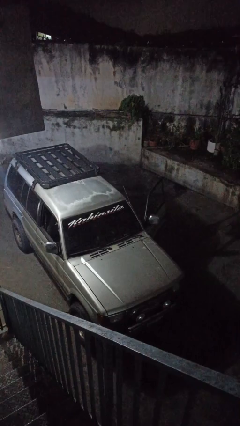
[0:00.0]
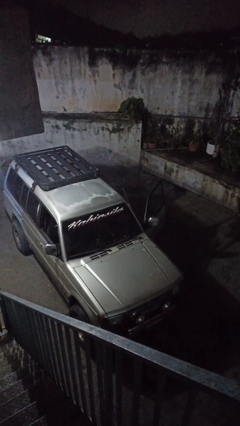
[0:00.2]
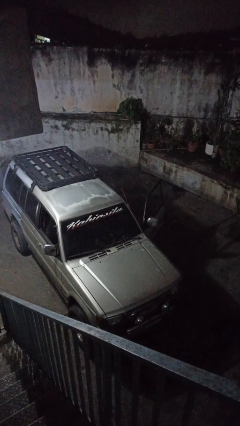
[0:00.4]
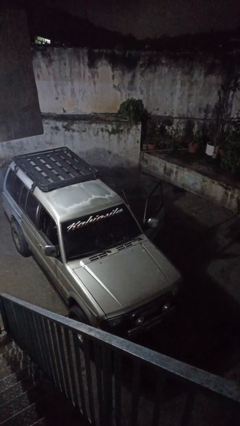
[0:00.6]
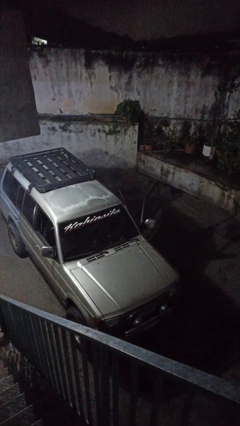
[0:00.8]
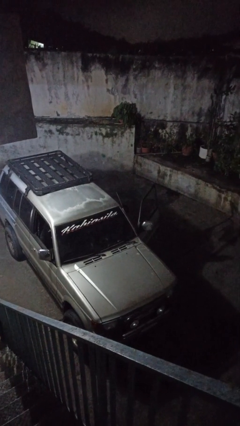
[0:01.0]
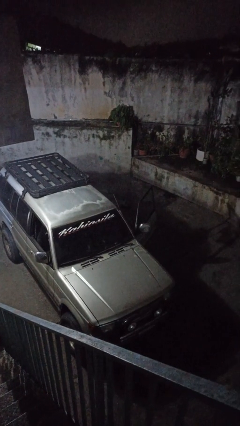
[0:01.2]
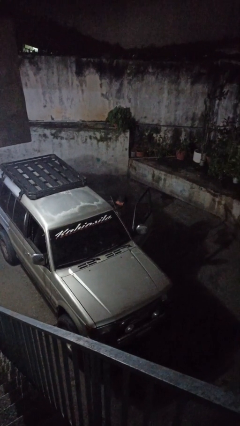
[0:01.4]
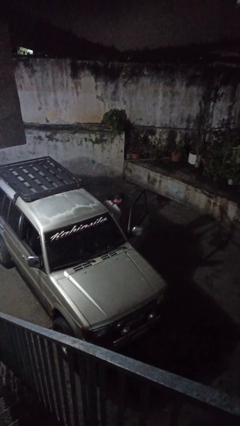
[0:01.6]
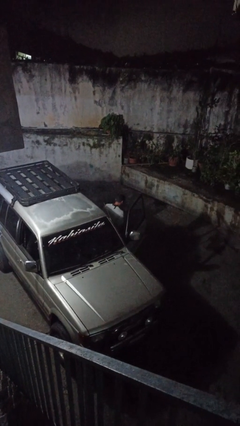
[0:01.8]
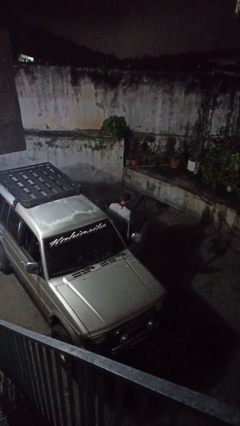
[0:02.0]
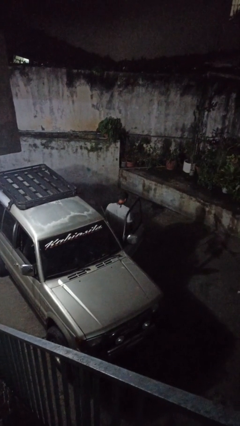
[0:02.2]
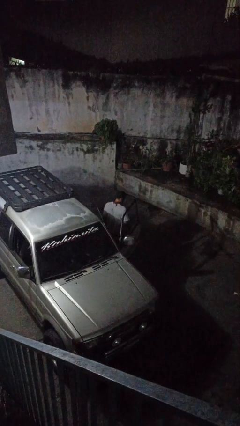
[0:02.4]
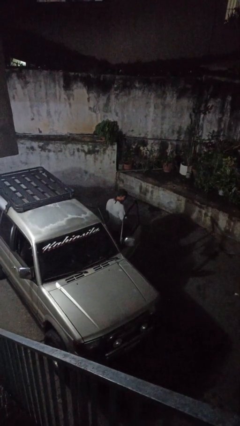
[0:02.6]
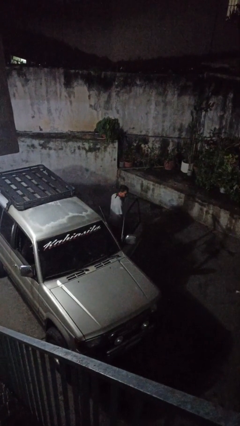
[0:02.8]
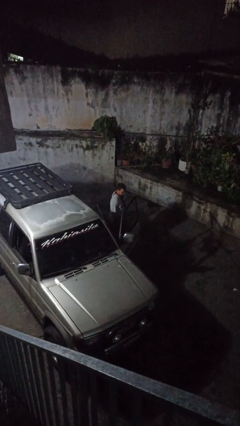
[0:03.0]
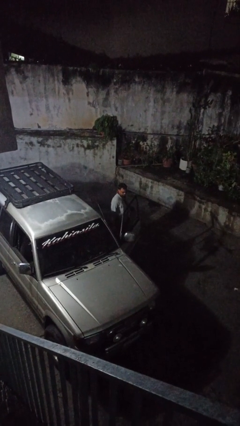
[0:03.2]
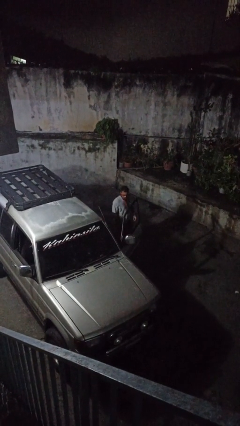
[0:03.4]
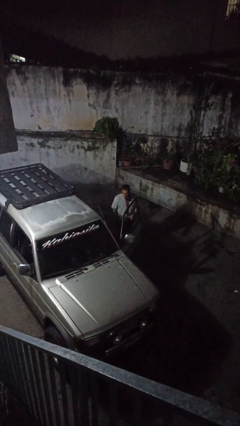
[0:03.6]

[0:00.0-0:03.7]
person exits car

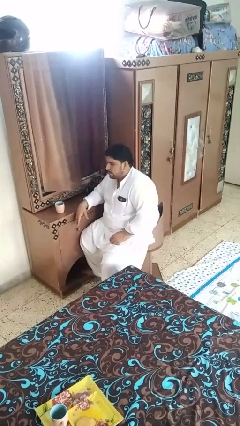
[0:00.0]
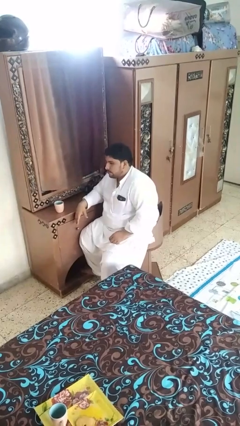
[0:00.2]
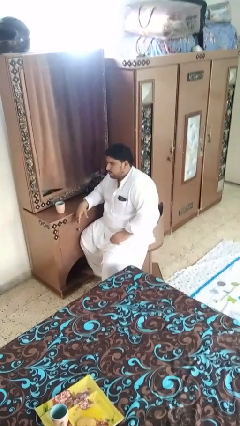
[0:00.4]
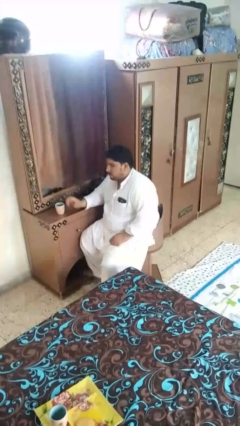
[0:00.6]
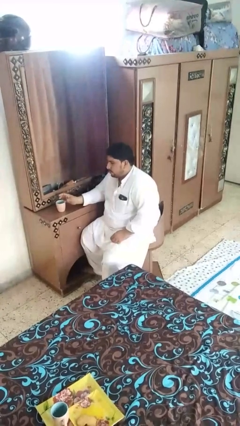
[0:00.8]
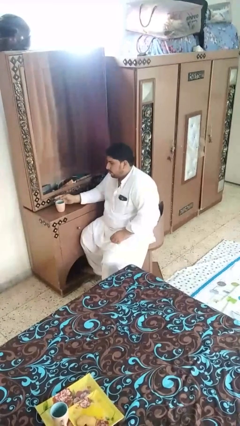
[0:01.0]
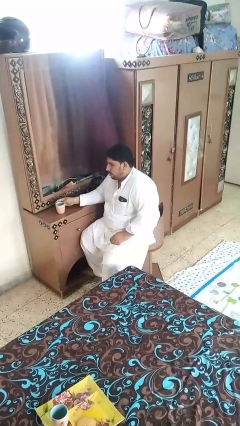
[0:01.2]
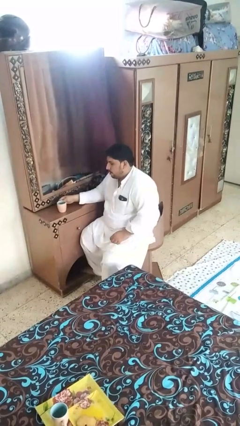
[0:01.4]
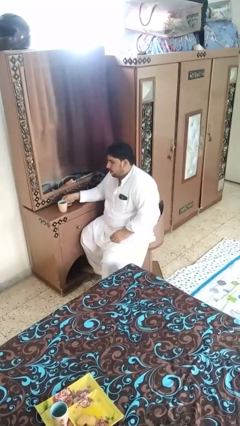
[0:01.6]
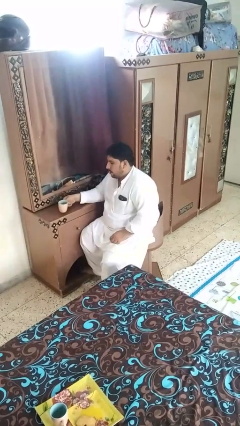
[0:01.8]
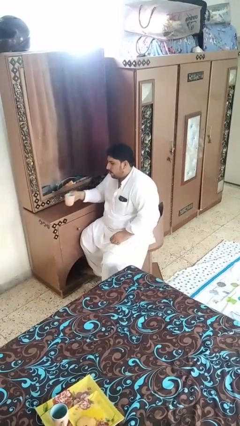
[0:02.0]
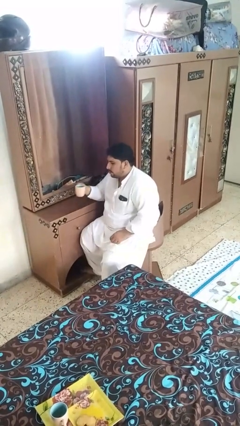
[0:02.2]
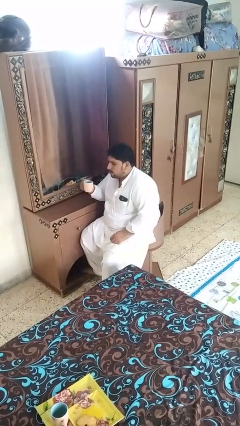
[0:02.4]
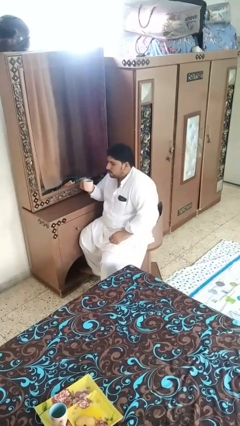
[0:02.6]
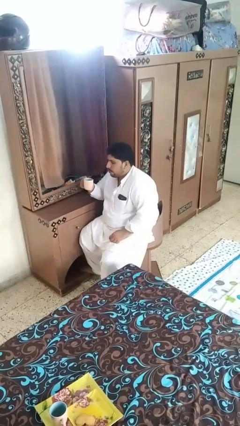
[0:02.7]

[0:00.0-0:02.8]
person picks up object from table

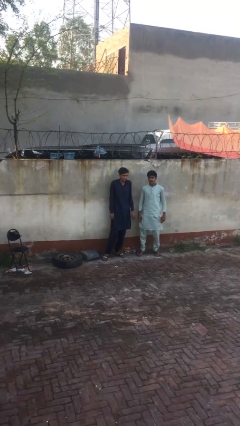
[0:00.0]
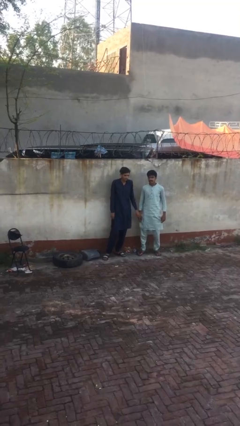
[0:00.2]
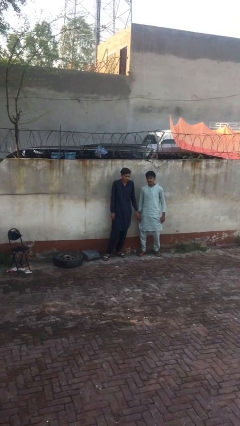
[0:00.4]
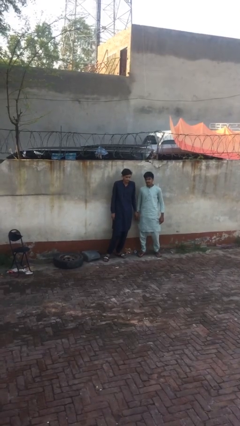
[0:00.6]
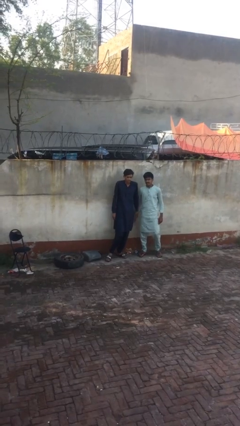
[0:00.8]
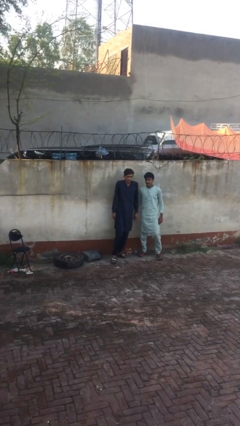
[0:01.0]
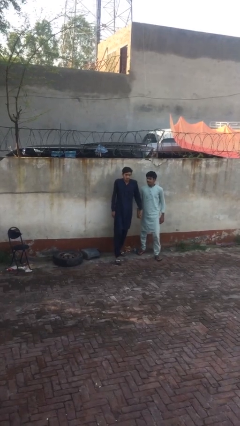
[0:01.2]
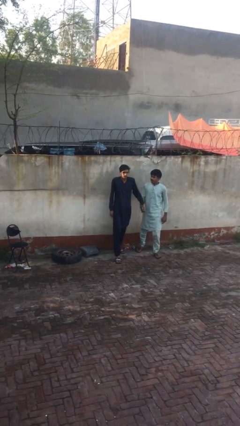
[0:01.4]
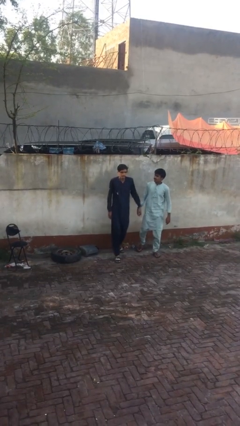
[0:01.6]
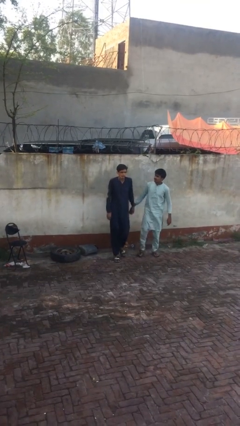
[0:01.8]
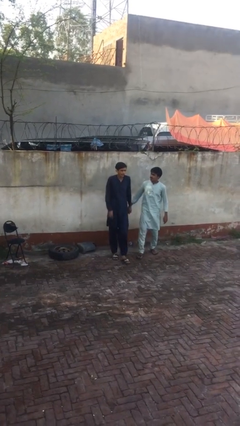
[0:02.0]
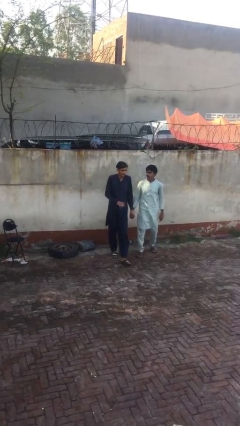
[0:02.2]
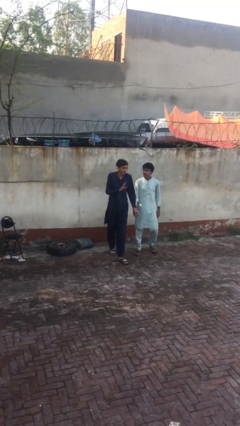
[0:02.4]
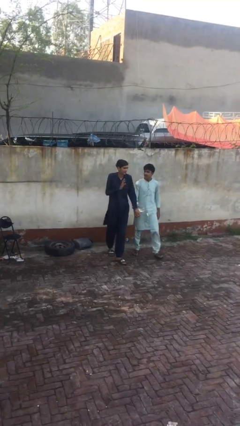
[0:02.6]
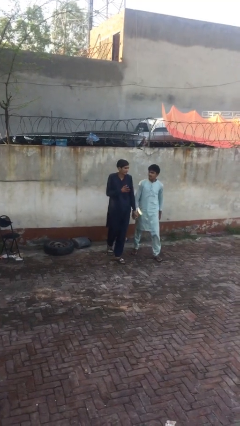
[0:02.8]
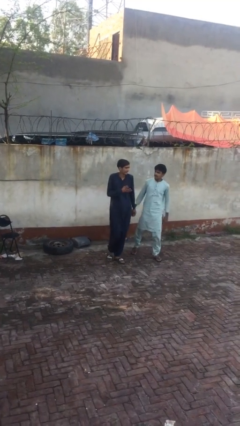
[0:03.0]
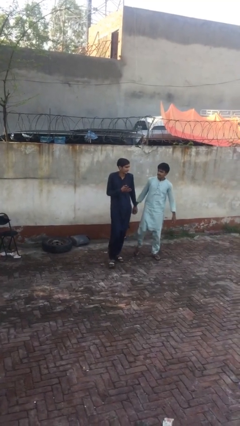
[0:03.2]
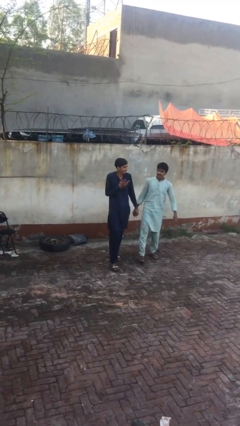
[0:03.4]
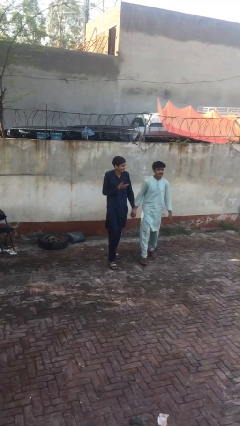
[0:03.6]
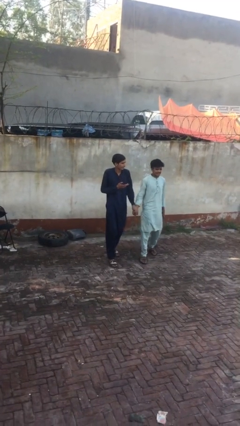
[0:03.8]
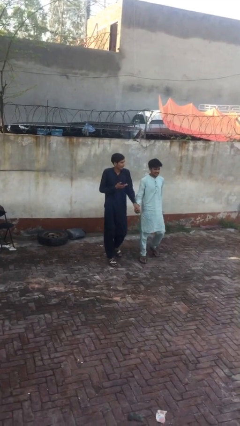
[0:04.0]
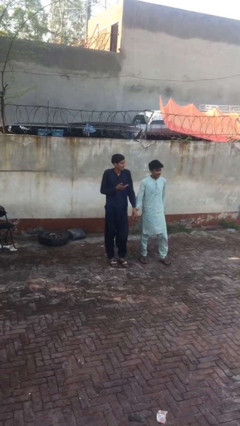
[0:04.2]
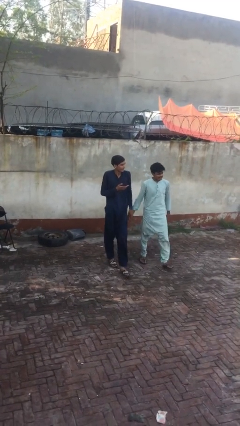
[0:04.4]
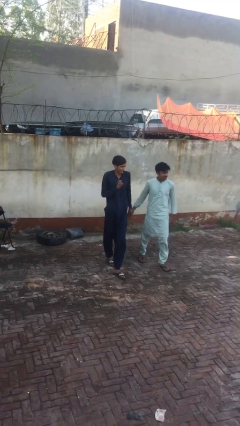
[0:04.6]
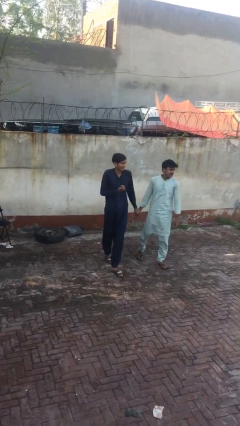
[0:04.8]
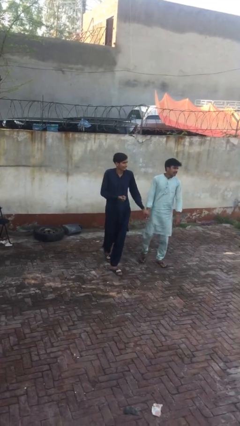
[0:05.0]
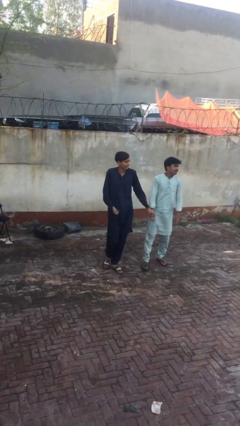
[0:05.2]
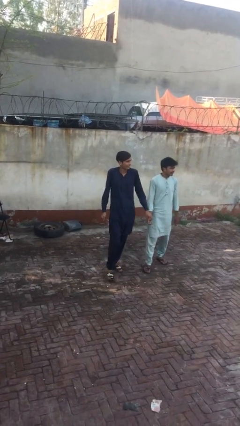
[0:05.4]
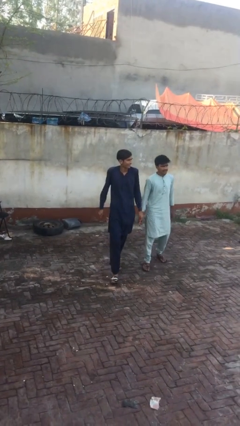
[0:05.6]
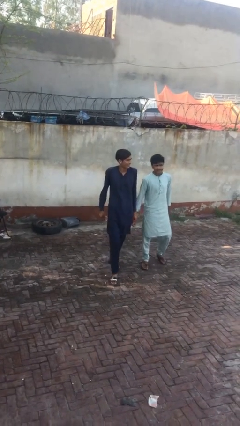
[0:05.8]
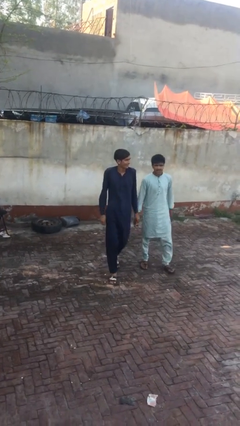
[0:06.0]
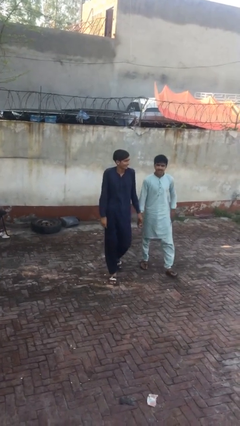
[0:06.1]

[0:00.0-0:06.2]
person holds hand

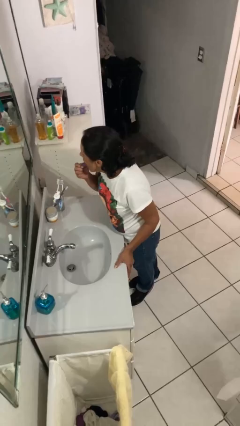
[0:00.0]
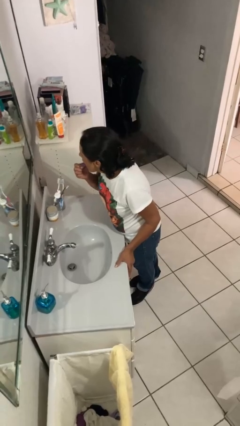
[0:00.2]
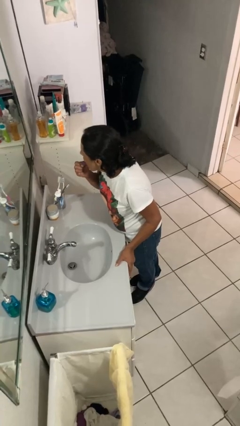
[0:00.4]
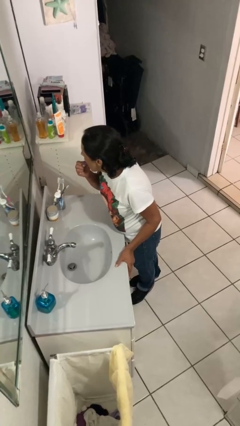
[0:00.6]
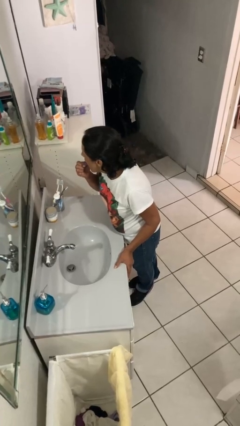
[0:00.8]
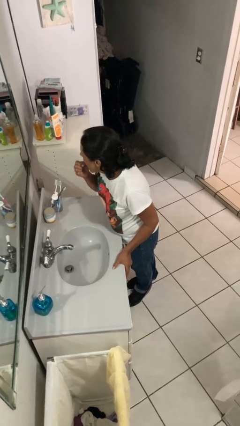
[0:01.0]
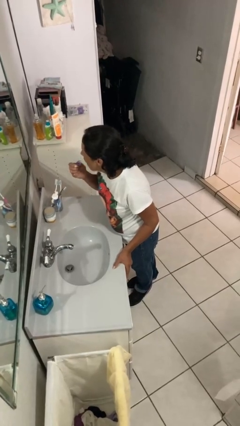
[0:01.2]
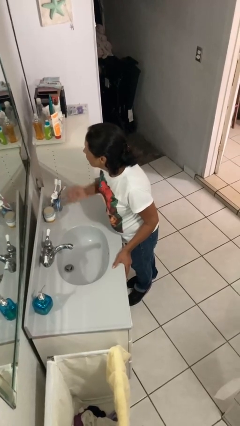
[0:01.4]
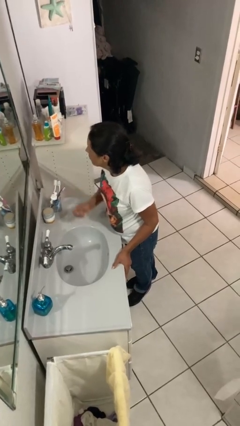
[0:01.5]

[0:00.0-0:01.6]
person flosses

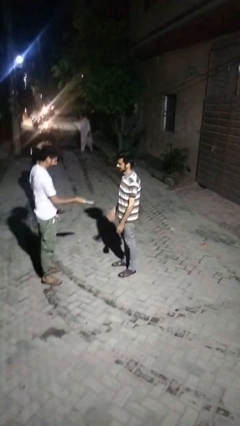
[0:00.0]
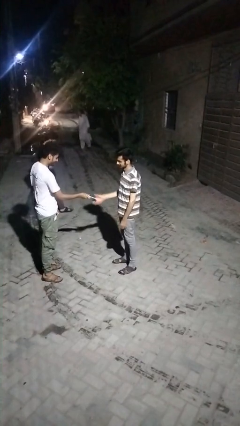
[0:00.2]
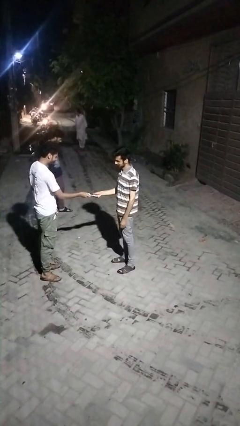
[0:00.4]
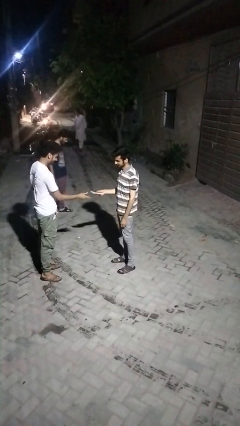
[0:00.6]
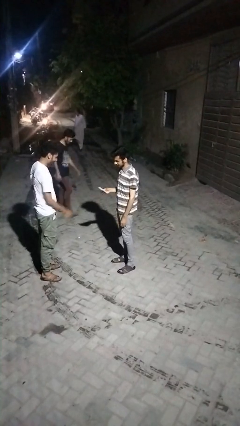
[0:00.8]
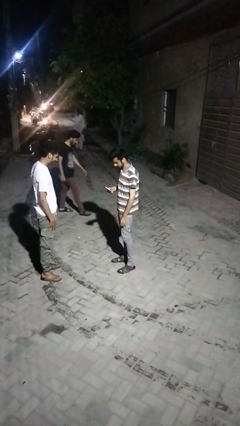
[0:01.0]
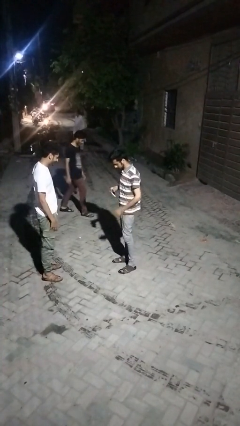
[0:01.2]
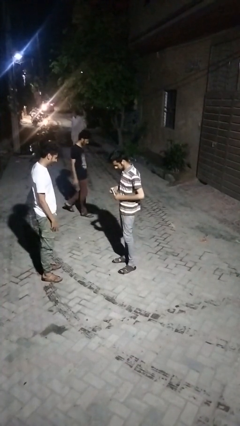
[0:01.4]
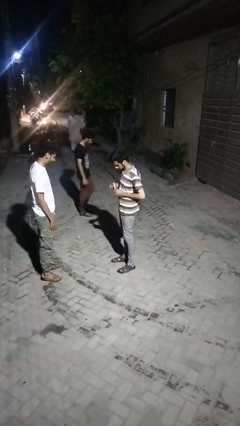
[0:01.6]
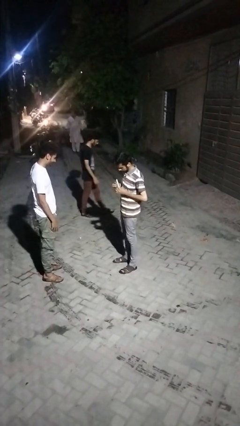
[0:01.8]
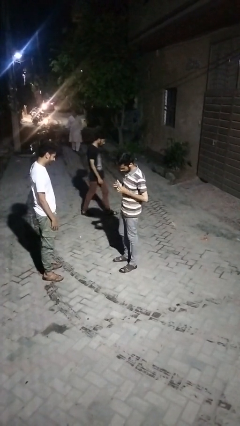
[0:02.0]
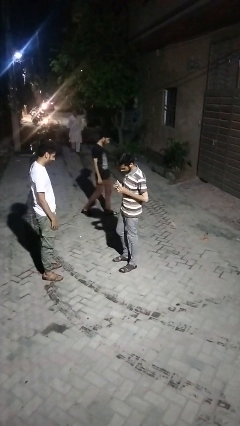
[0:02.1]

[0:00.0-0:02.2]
person transfers object to person

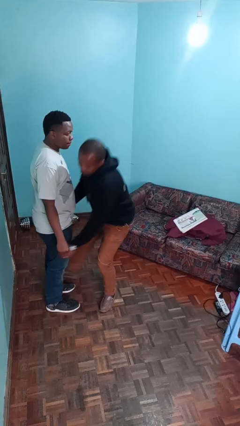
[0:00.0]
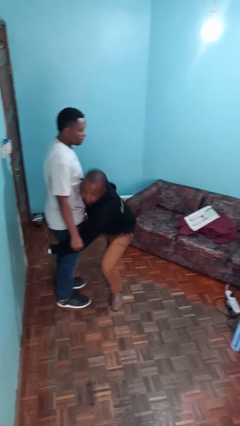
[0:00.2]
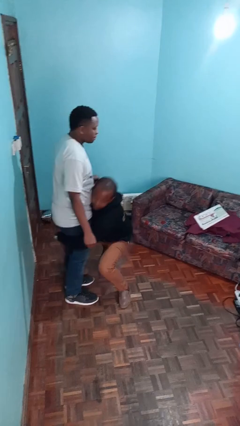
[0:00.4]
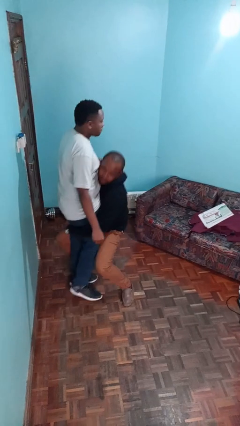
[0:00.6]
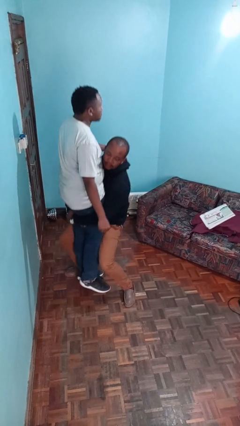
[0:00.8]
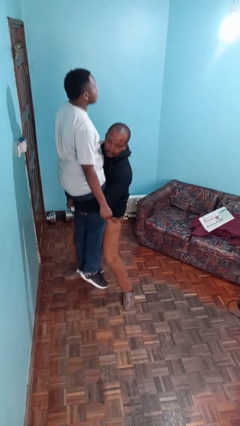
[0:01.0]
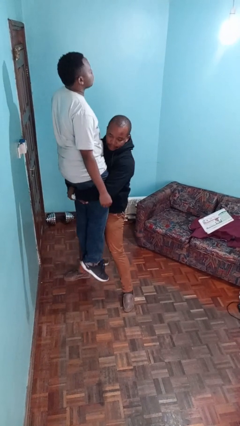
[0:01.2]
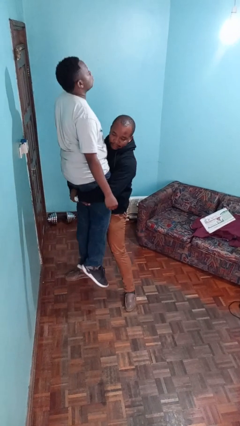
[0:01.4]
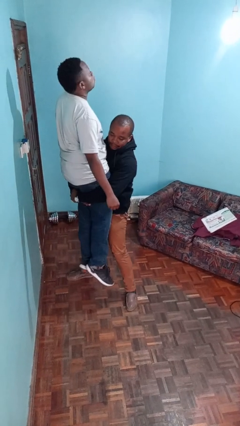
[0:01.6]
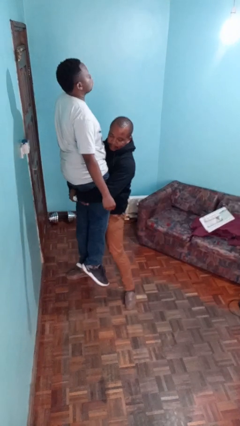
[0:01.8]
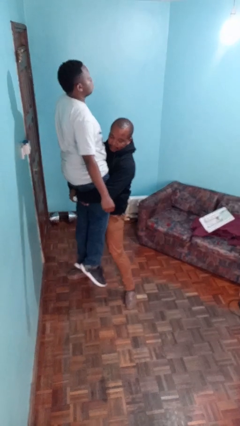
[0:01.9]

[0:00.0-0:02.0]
person picks up person
